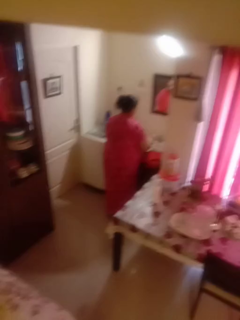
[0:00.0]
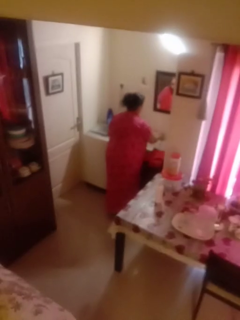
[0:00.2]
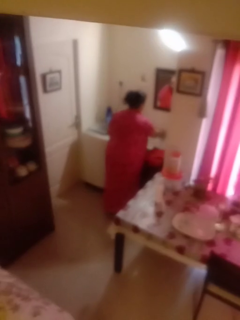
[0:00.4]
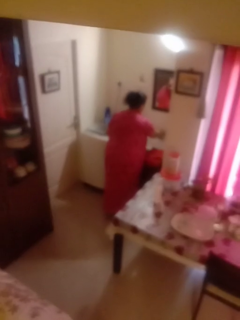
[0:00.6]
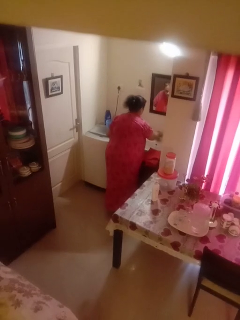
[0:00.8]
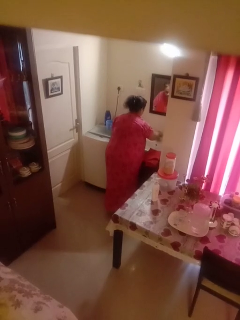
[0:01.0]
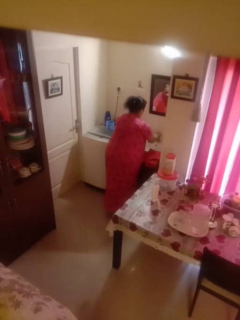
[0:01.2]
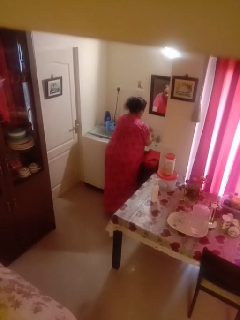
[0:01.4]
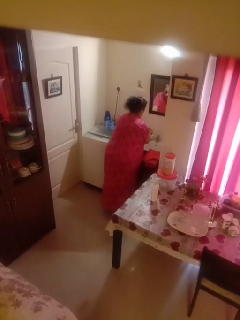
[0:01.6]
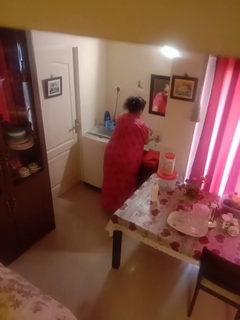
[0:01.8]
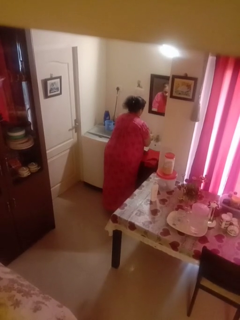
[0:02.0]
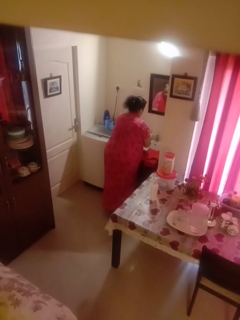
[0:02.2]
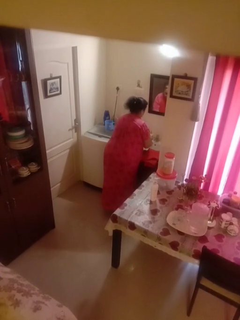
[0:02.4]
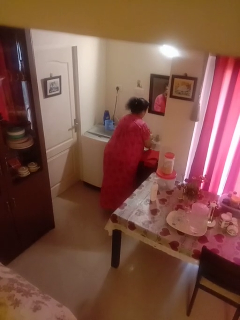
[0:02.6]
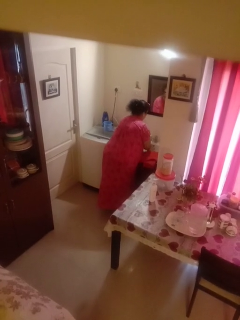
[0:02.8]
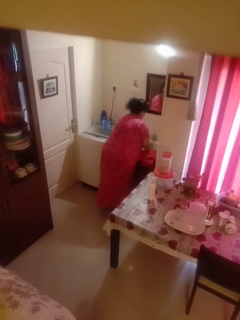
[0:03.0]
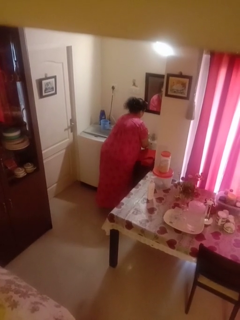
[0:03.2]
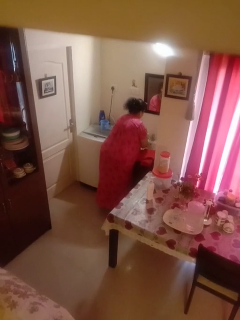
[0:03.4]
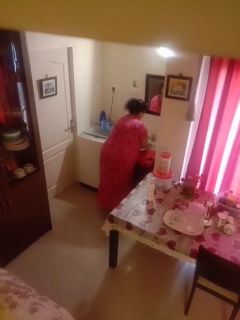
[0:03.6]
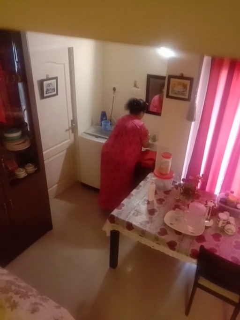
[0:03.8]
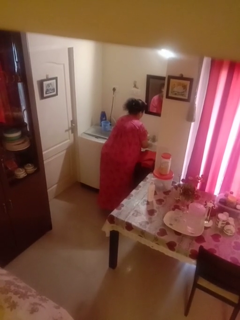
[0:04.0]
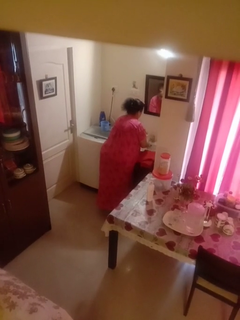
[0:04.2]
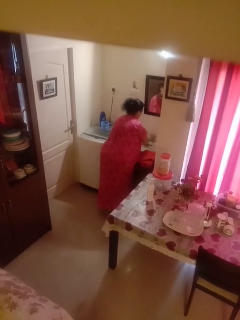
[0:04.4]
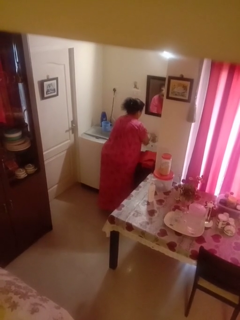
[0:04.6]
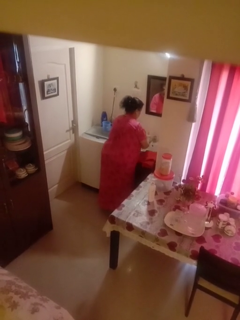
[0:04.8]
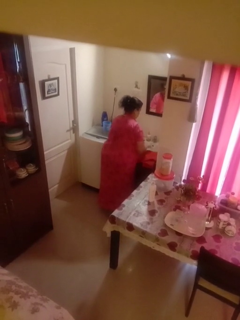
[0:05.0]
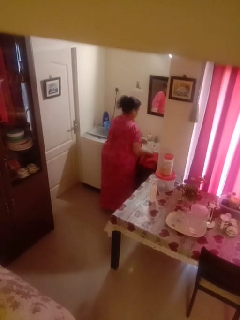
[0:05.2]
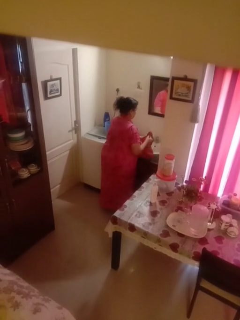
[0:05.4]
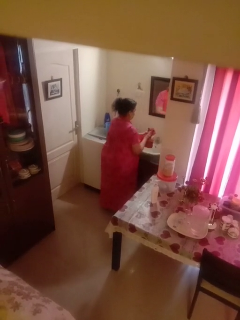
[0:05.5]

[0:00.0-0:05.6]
person washes hands

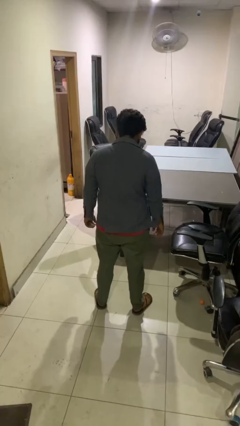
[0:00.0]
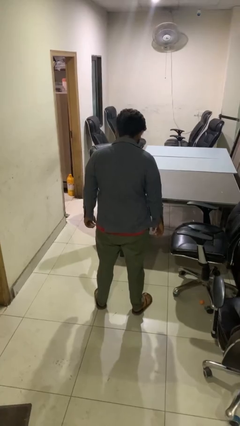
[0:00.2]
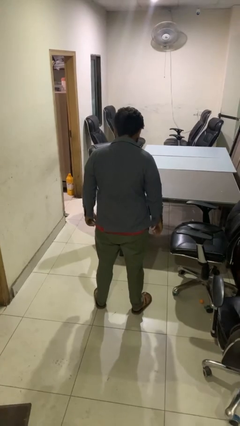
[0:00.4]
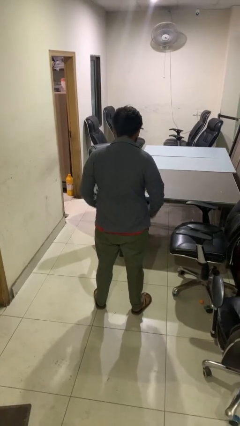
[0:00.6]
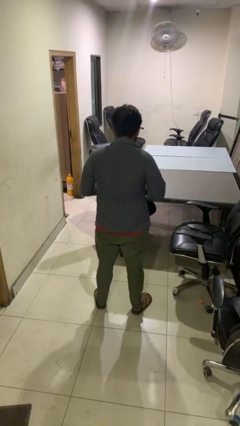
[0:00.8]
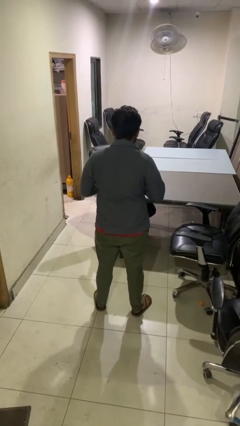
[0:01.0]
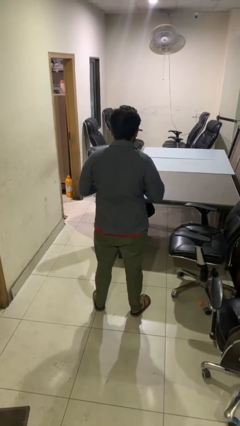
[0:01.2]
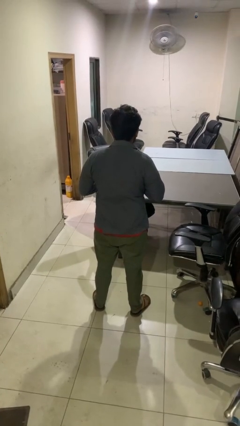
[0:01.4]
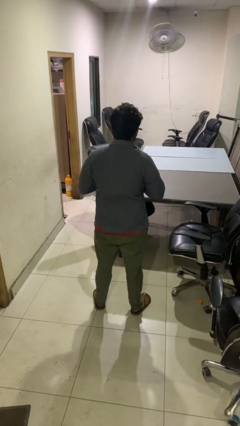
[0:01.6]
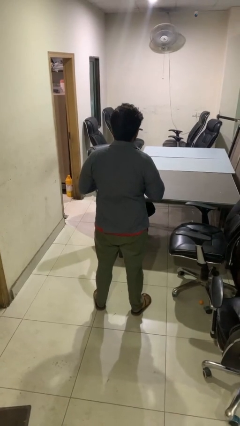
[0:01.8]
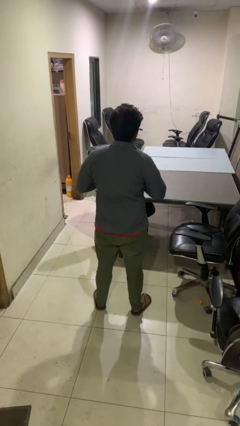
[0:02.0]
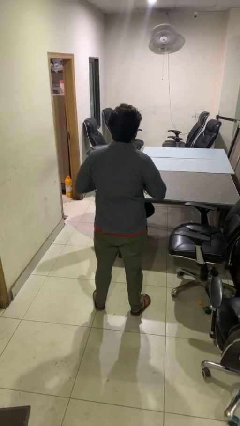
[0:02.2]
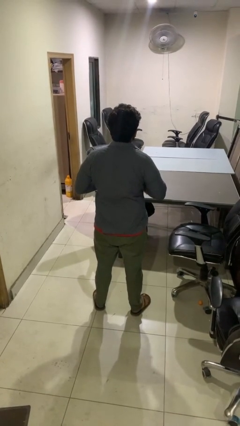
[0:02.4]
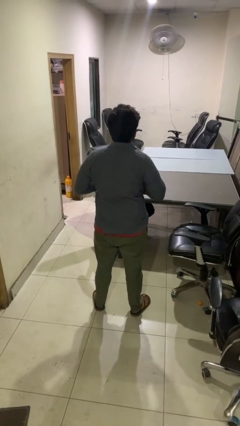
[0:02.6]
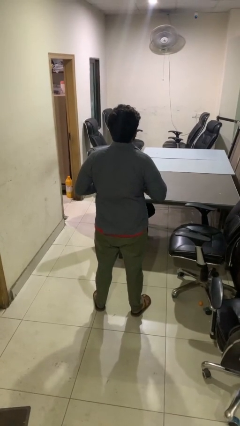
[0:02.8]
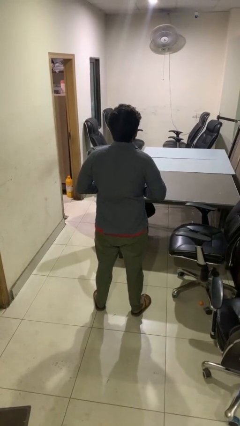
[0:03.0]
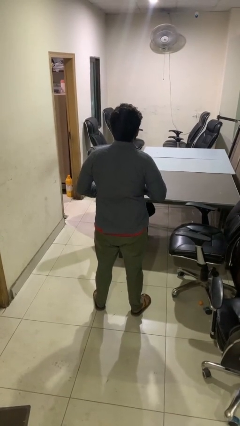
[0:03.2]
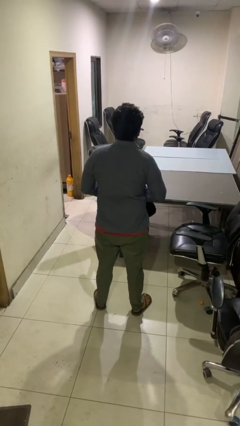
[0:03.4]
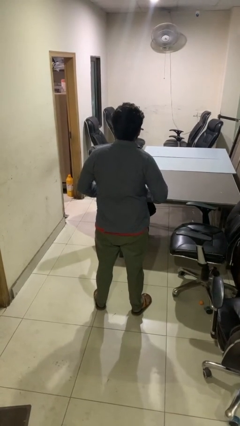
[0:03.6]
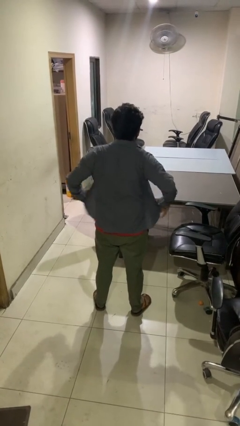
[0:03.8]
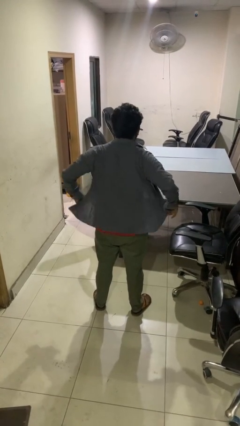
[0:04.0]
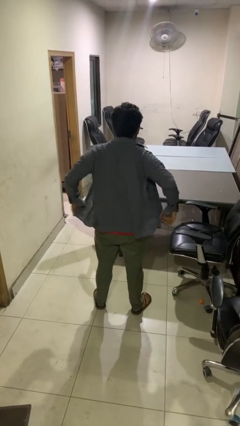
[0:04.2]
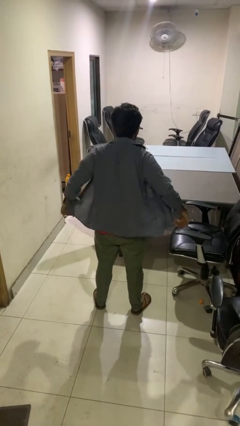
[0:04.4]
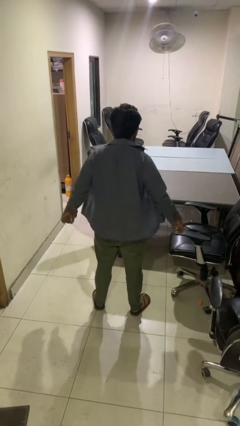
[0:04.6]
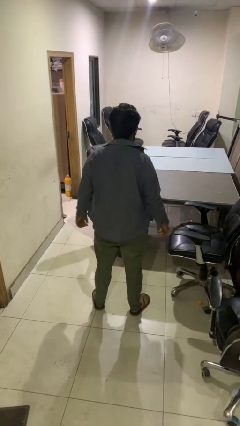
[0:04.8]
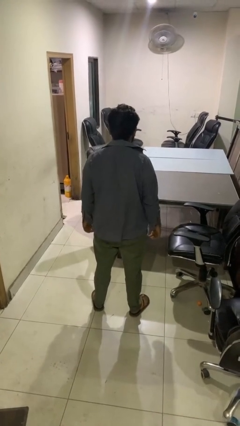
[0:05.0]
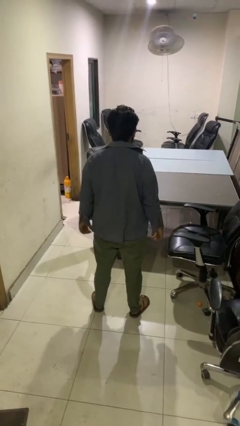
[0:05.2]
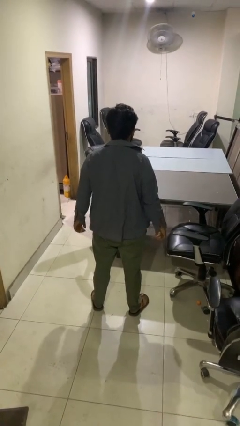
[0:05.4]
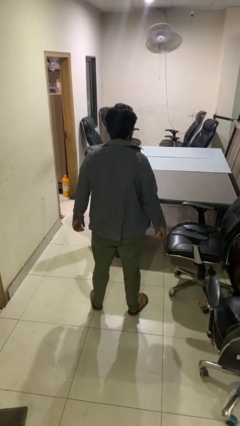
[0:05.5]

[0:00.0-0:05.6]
person unbuttons shirt

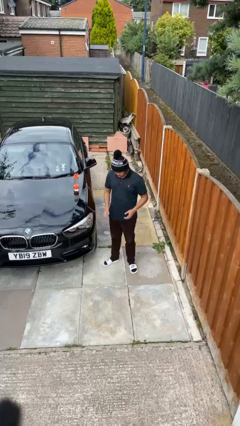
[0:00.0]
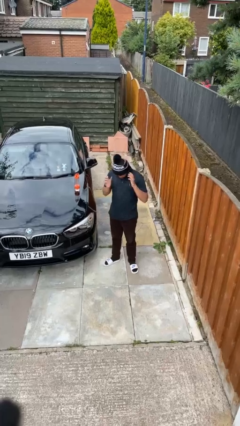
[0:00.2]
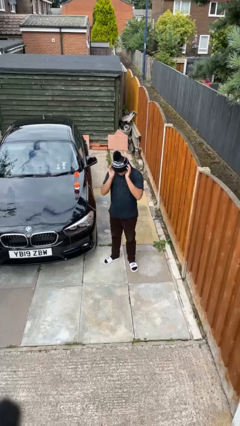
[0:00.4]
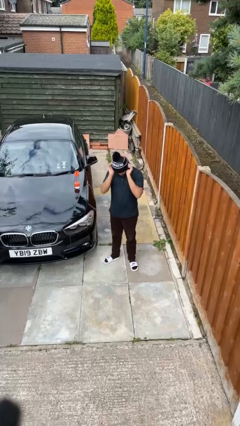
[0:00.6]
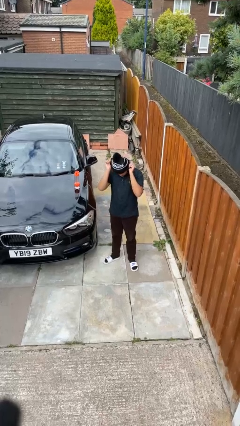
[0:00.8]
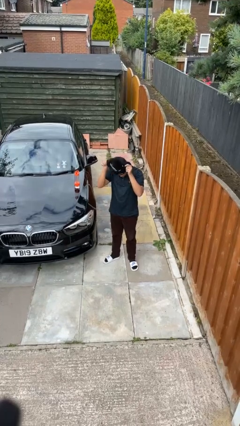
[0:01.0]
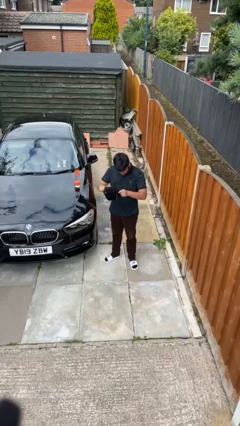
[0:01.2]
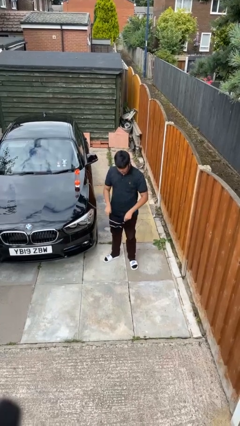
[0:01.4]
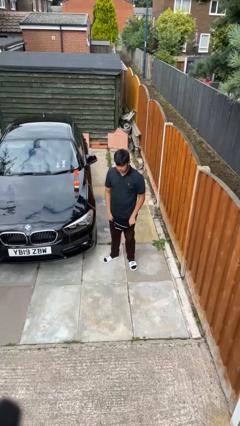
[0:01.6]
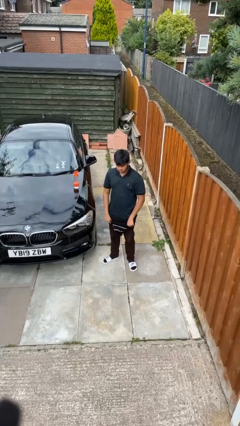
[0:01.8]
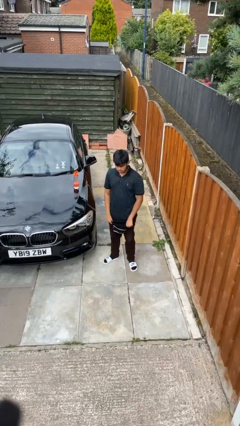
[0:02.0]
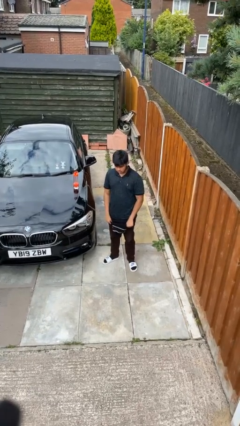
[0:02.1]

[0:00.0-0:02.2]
person takes off hat

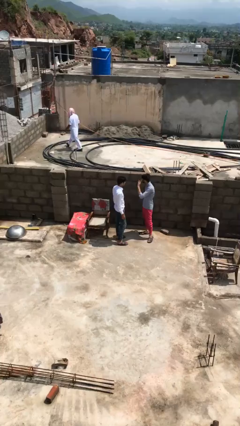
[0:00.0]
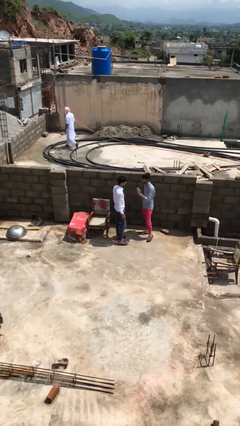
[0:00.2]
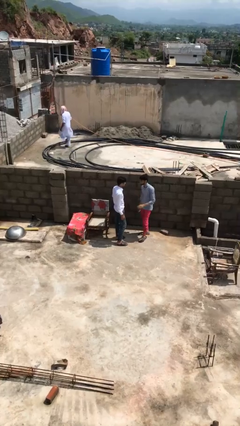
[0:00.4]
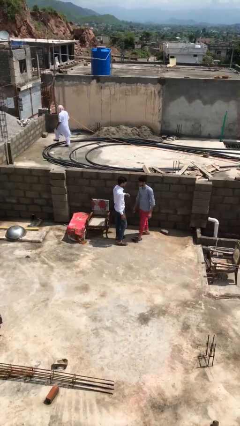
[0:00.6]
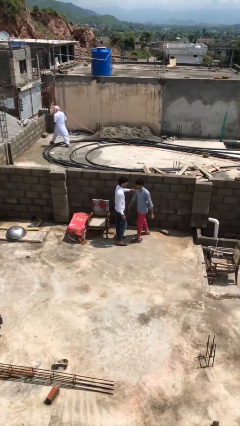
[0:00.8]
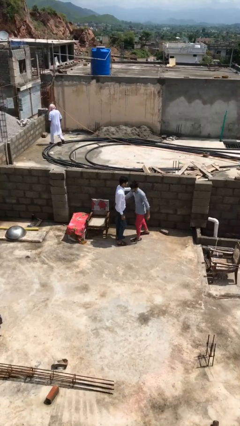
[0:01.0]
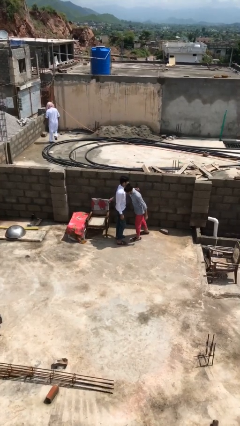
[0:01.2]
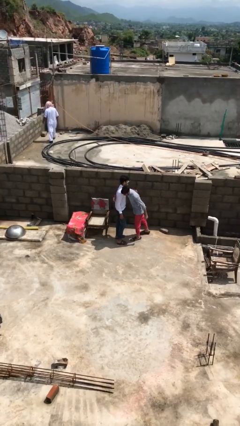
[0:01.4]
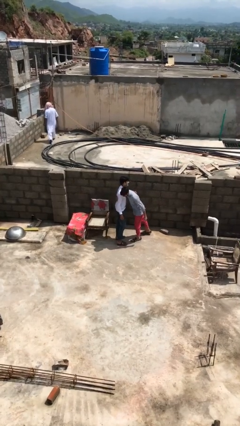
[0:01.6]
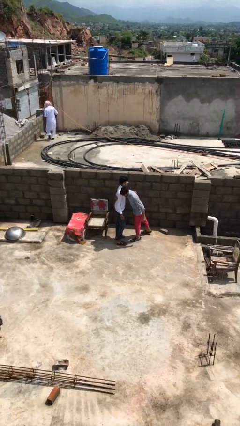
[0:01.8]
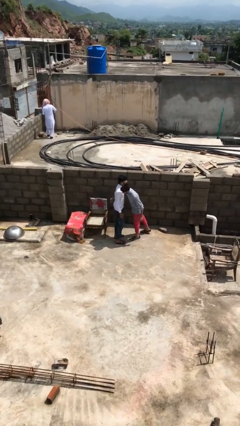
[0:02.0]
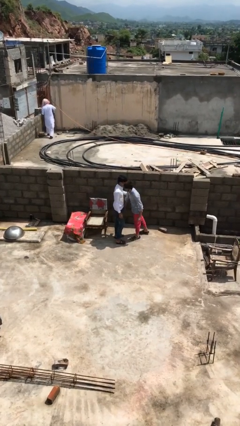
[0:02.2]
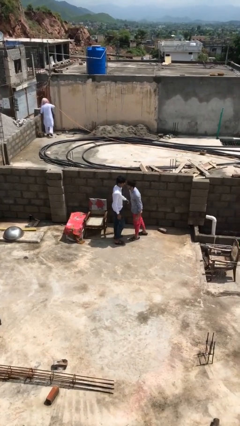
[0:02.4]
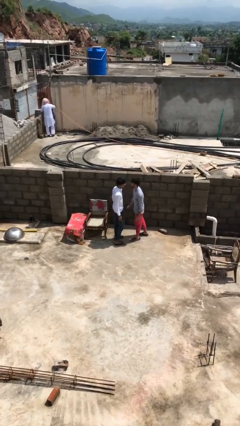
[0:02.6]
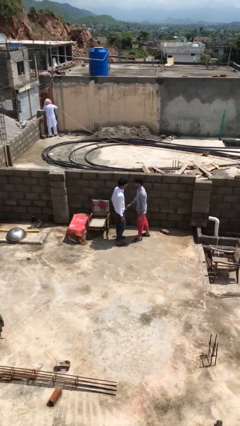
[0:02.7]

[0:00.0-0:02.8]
person embraces person

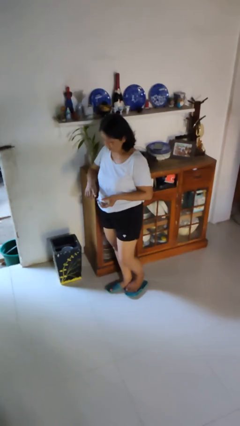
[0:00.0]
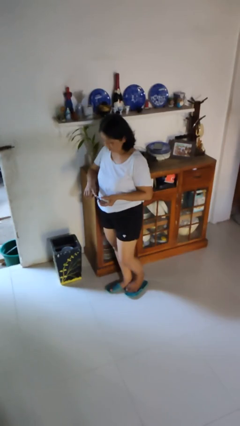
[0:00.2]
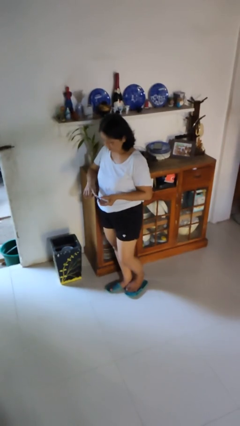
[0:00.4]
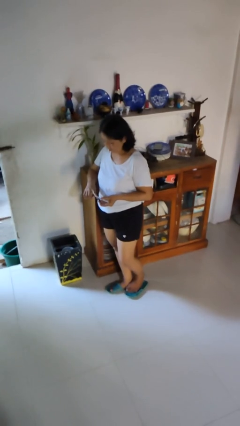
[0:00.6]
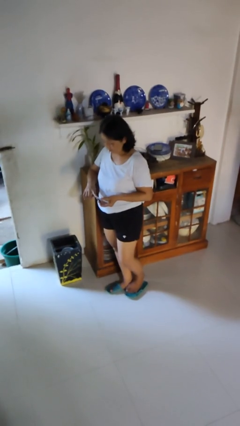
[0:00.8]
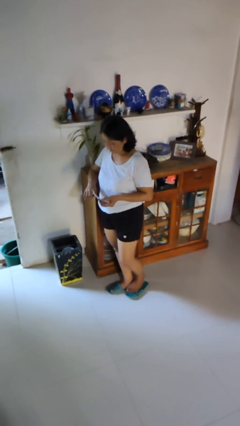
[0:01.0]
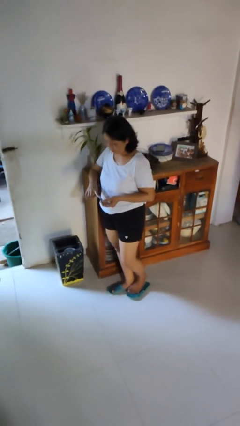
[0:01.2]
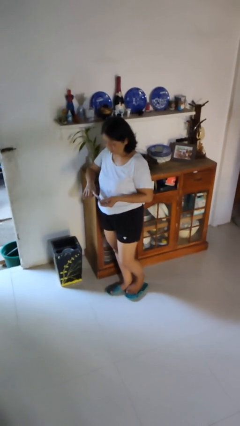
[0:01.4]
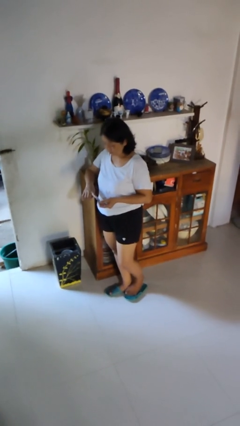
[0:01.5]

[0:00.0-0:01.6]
person clips fingernails

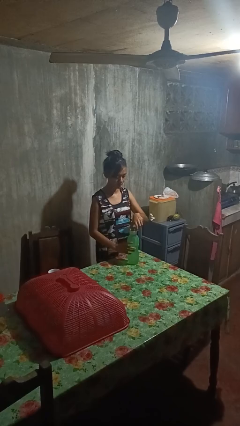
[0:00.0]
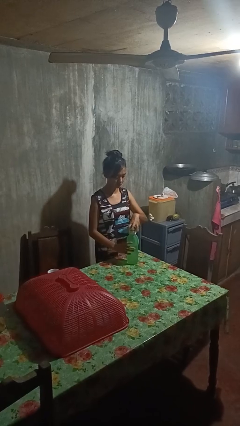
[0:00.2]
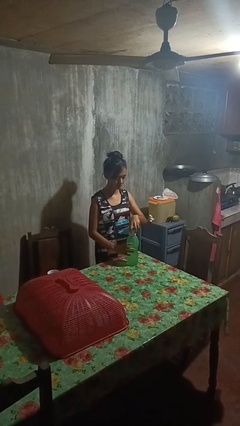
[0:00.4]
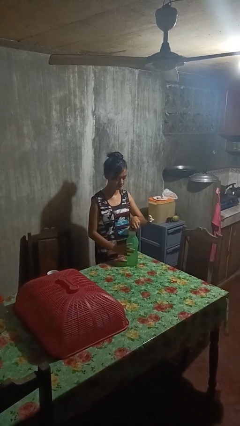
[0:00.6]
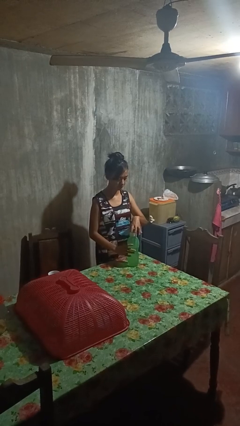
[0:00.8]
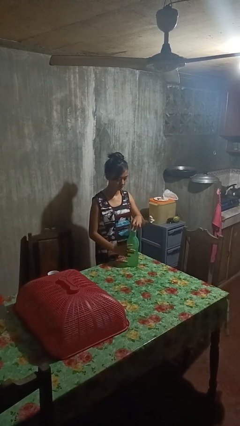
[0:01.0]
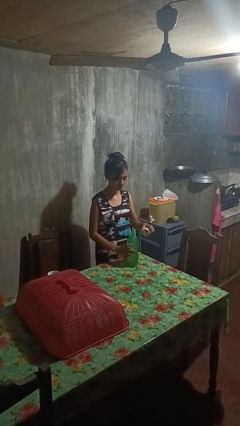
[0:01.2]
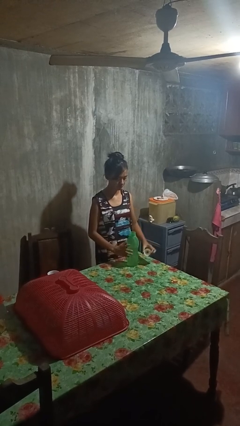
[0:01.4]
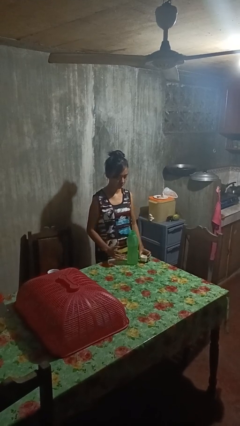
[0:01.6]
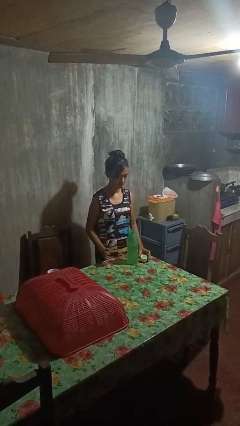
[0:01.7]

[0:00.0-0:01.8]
person unscrews lid from bottle
